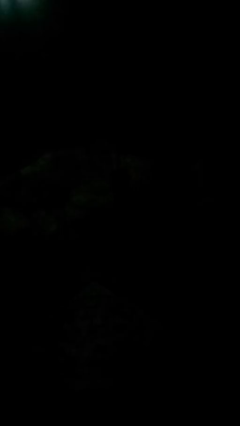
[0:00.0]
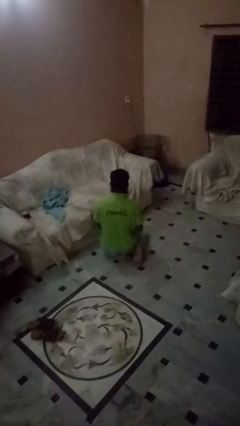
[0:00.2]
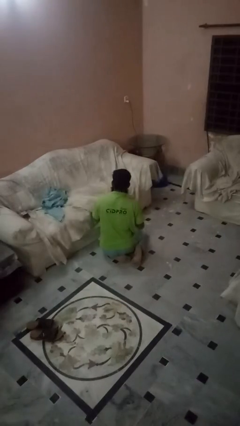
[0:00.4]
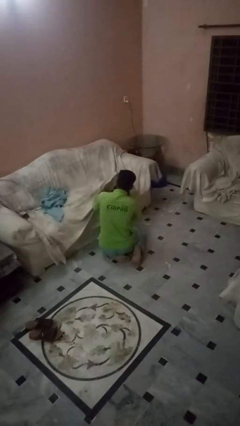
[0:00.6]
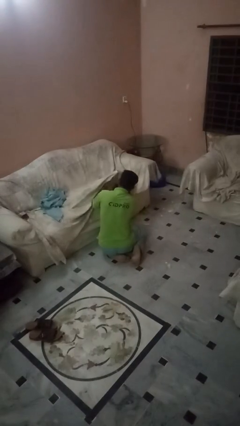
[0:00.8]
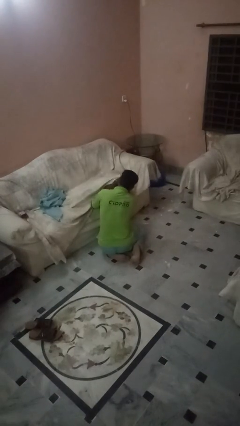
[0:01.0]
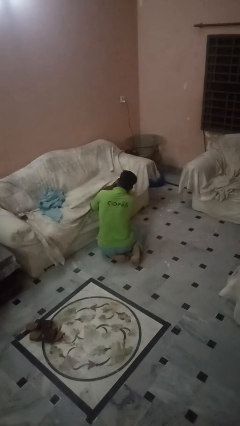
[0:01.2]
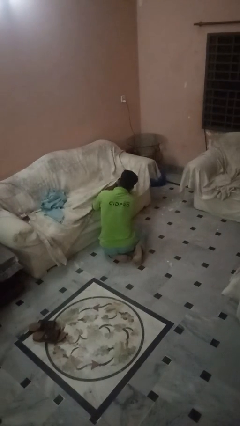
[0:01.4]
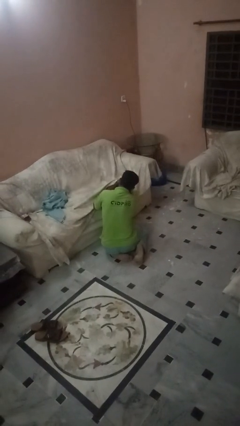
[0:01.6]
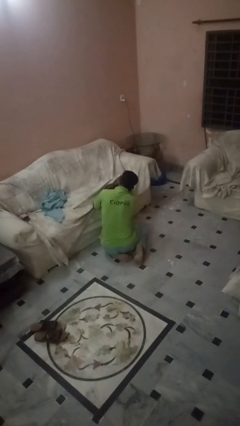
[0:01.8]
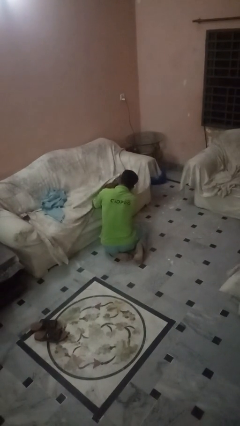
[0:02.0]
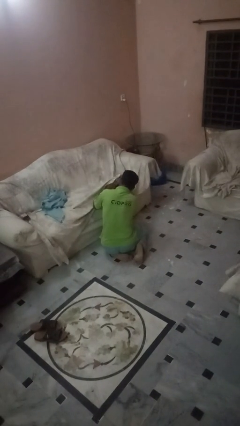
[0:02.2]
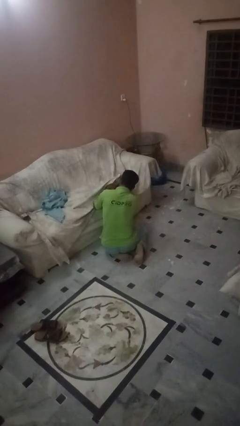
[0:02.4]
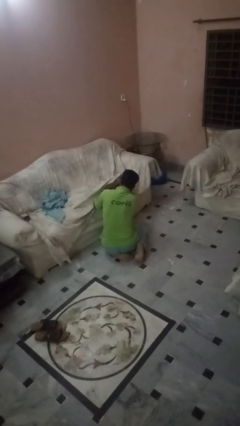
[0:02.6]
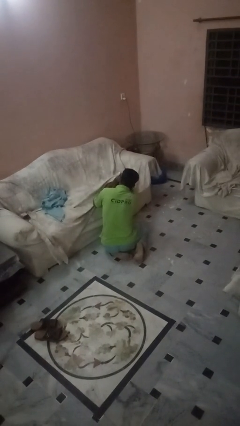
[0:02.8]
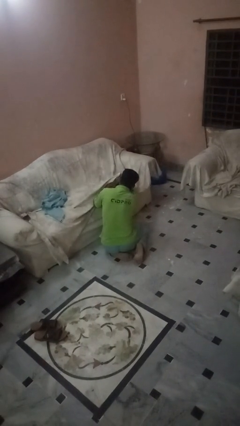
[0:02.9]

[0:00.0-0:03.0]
person searches in couch

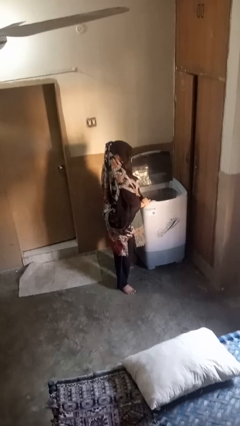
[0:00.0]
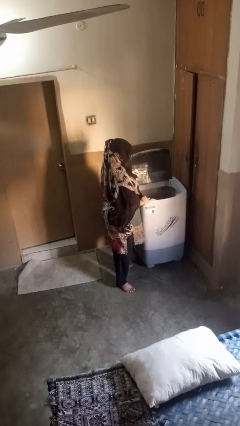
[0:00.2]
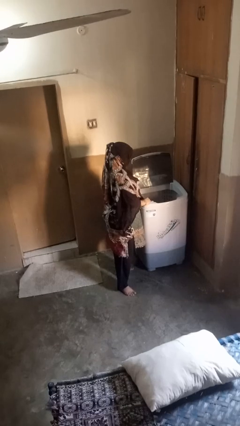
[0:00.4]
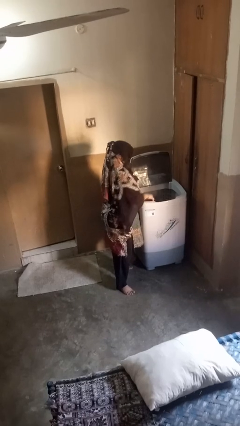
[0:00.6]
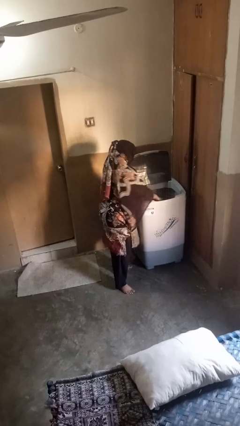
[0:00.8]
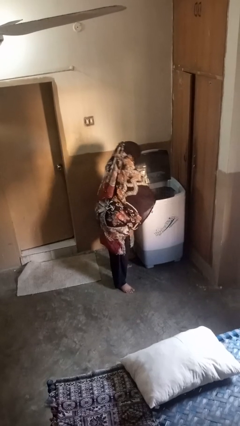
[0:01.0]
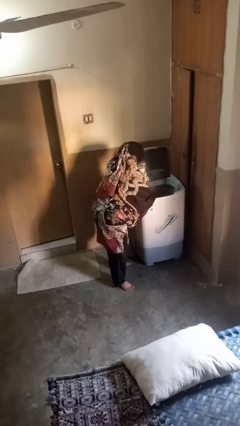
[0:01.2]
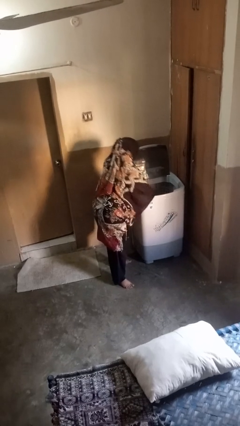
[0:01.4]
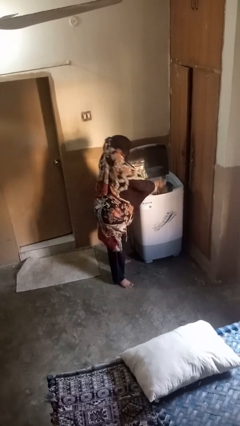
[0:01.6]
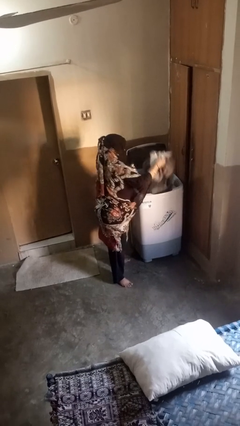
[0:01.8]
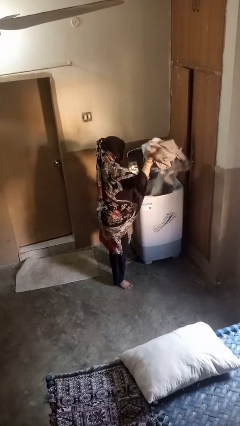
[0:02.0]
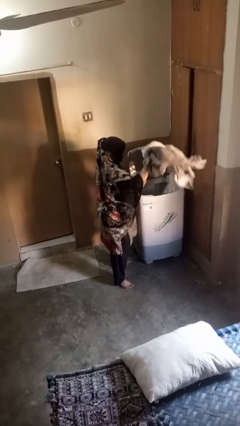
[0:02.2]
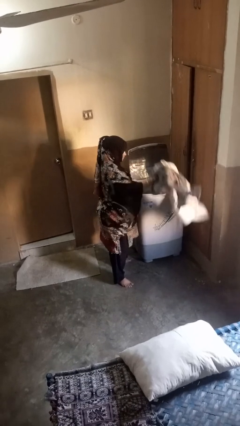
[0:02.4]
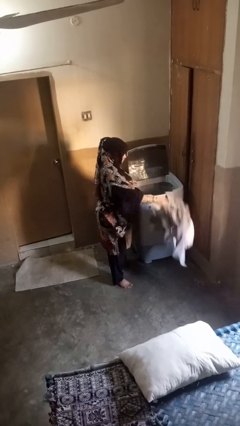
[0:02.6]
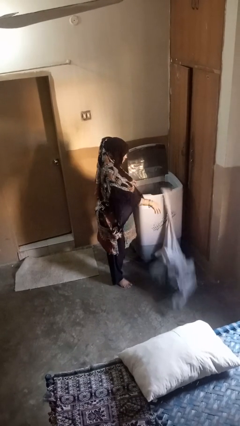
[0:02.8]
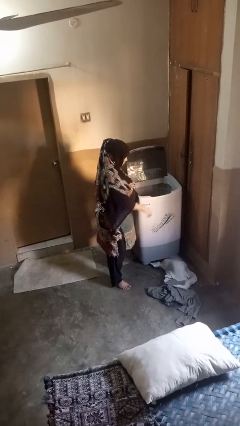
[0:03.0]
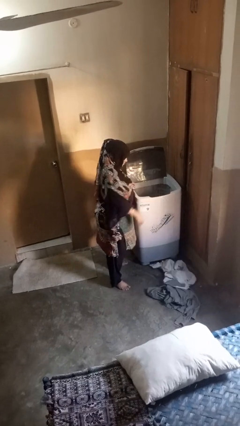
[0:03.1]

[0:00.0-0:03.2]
person unloads clotheswasher

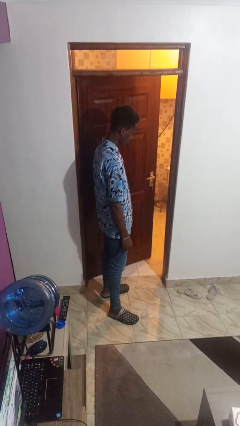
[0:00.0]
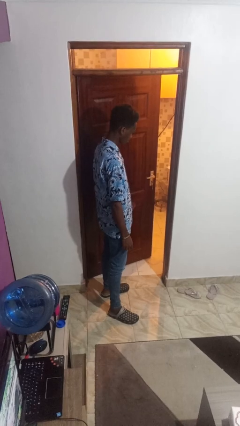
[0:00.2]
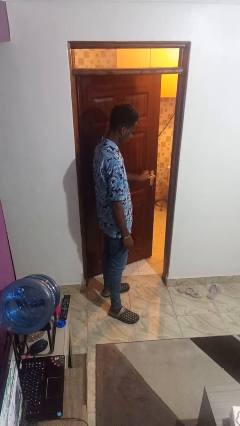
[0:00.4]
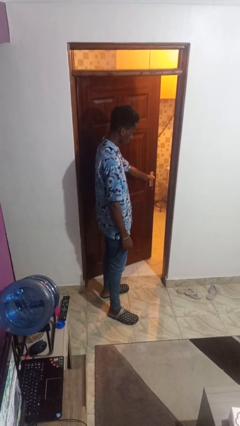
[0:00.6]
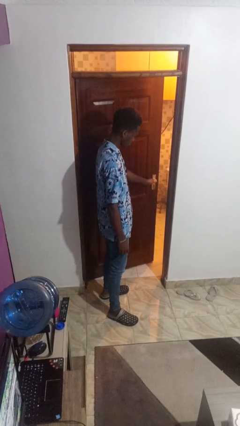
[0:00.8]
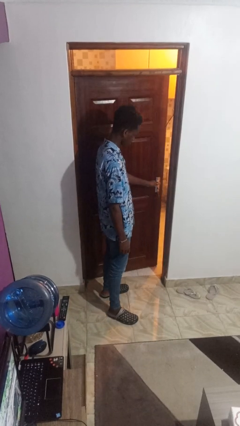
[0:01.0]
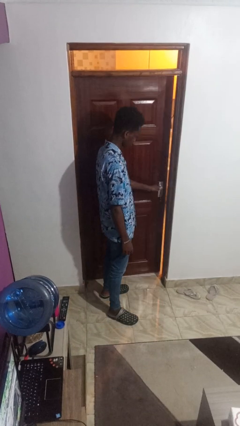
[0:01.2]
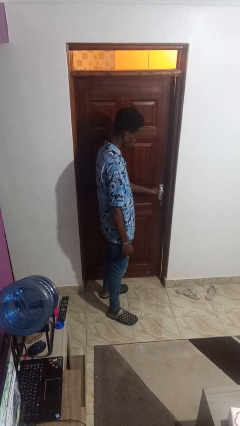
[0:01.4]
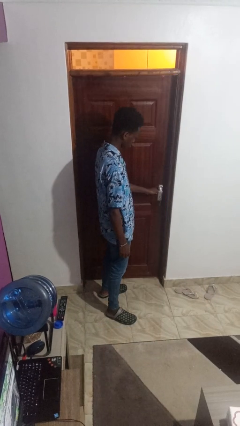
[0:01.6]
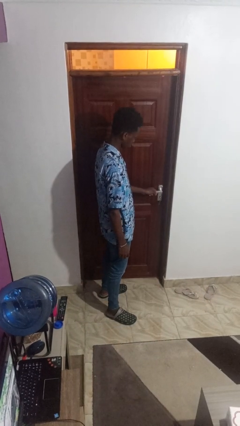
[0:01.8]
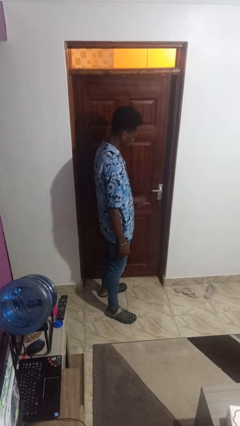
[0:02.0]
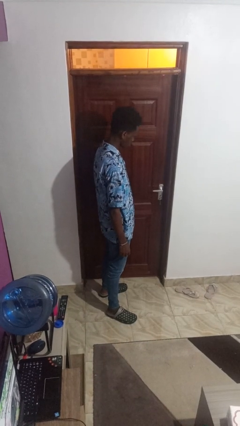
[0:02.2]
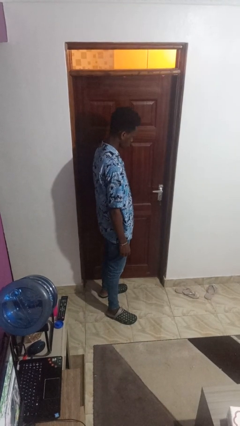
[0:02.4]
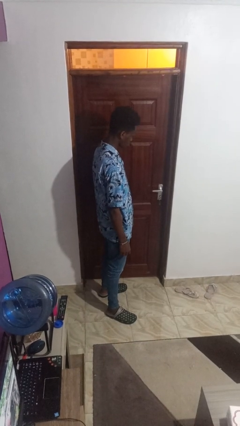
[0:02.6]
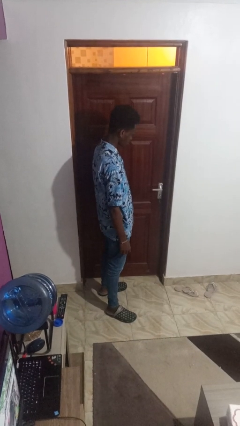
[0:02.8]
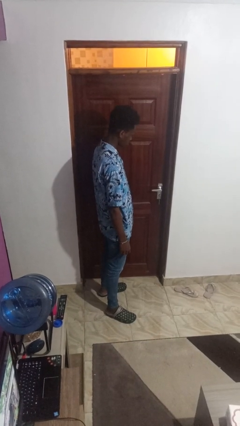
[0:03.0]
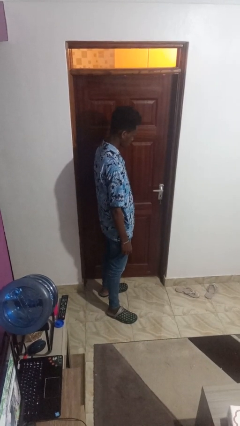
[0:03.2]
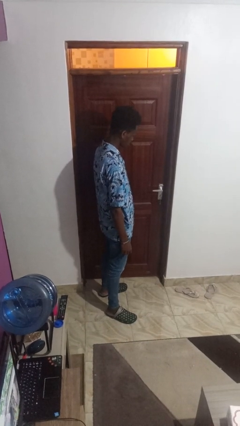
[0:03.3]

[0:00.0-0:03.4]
person closes facility door

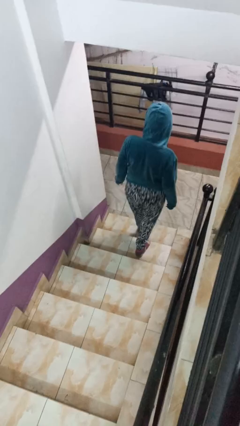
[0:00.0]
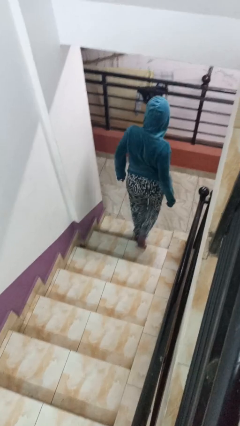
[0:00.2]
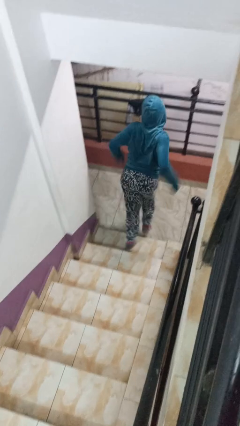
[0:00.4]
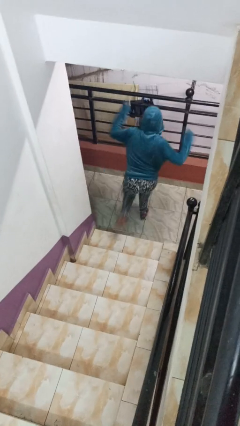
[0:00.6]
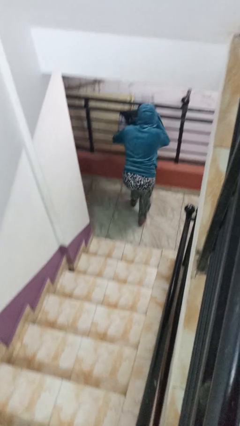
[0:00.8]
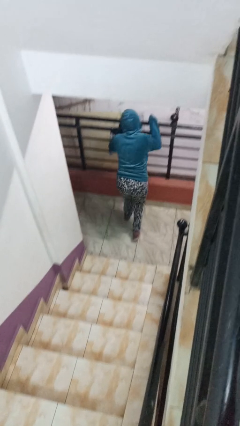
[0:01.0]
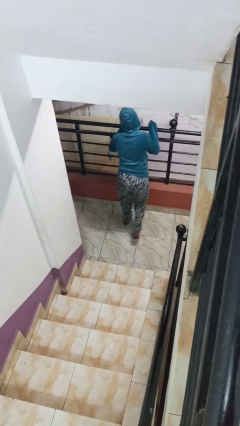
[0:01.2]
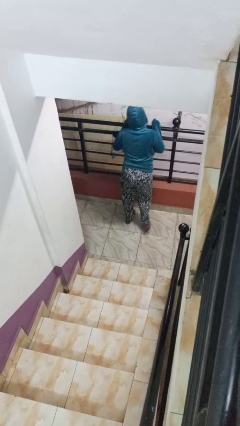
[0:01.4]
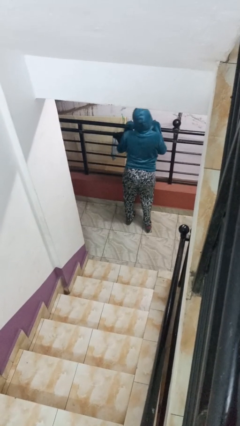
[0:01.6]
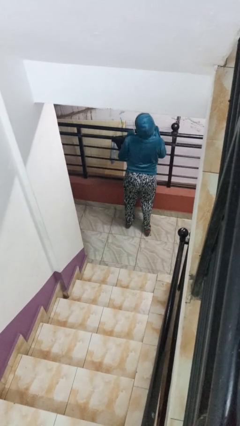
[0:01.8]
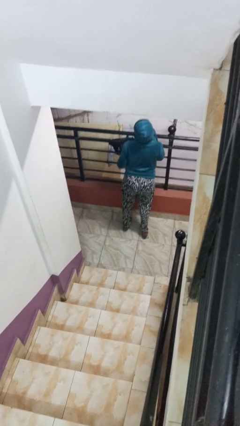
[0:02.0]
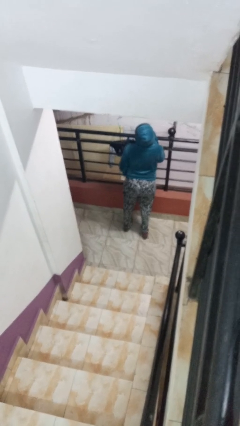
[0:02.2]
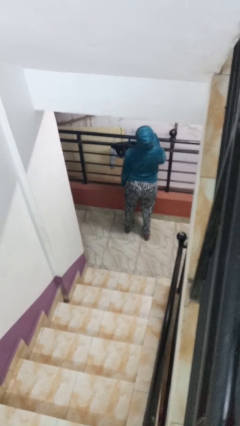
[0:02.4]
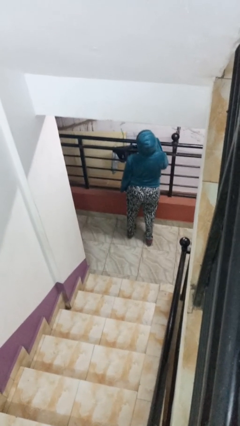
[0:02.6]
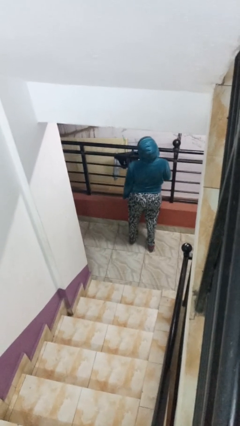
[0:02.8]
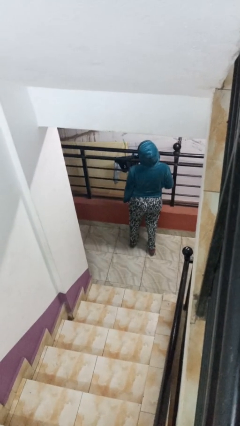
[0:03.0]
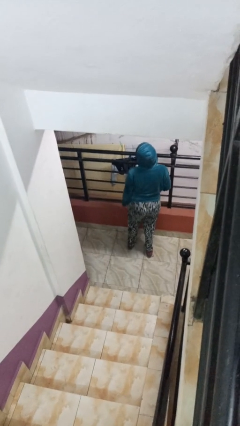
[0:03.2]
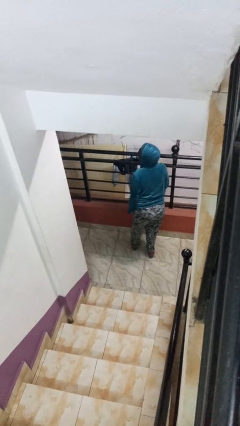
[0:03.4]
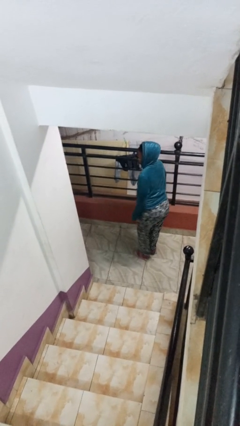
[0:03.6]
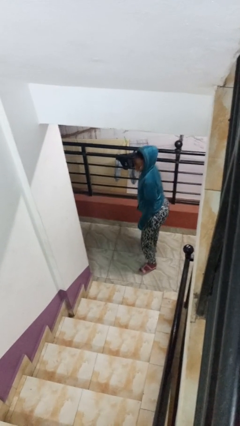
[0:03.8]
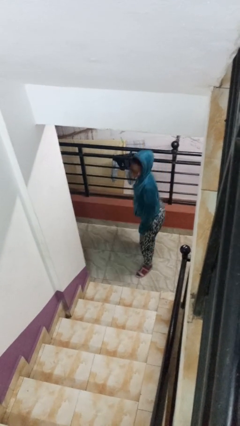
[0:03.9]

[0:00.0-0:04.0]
person trips on stair

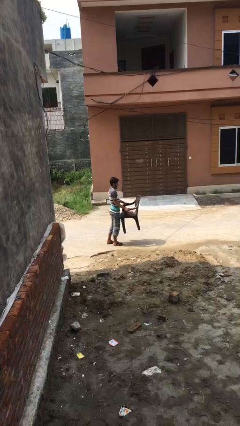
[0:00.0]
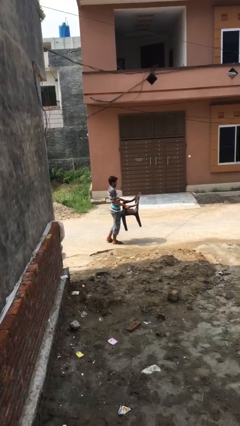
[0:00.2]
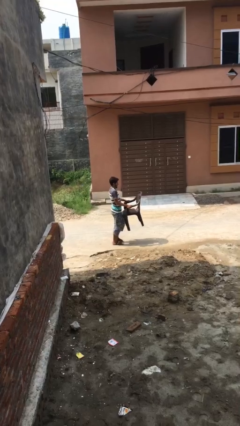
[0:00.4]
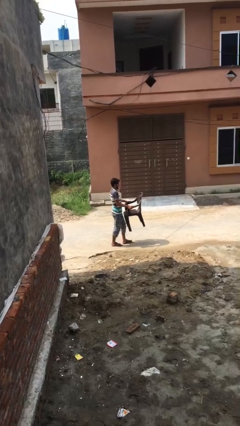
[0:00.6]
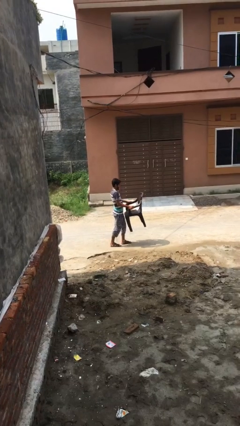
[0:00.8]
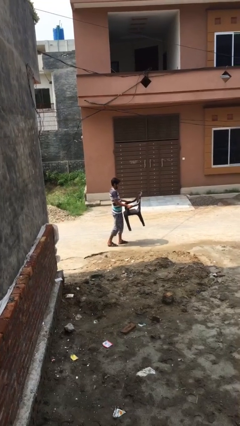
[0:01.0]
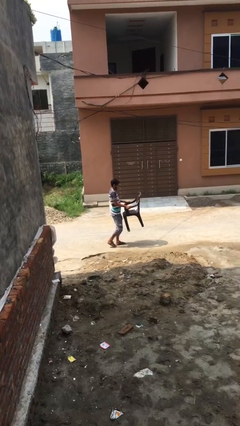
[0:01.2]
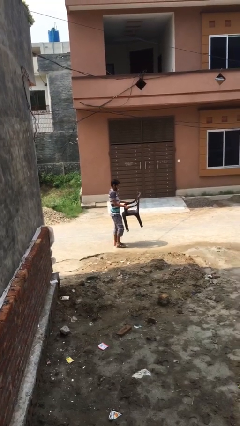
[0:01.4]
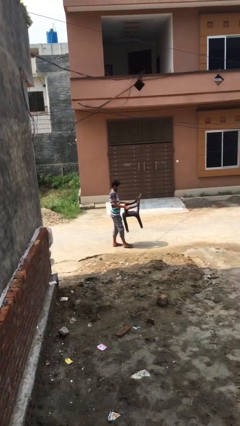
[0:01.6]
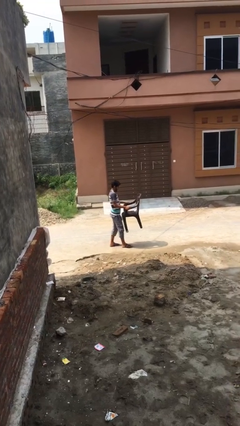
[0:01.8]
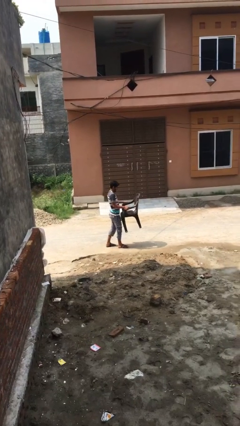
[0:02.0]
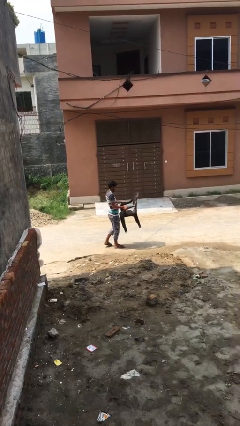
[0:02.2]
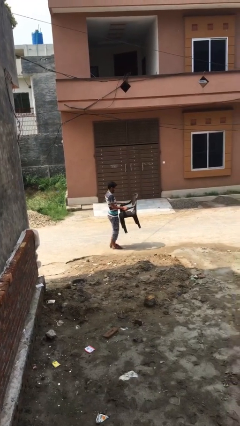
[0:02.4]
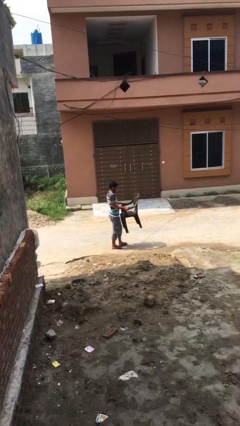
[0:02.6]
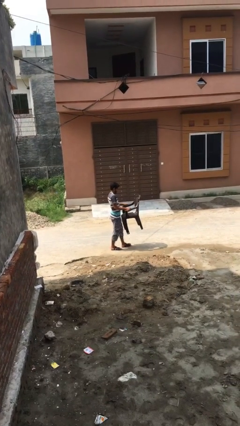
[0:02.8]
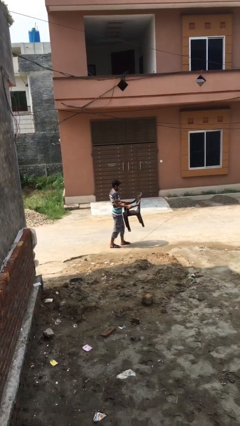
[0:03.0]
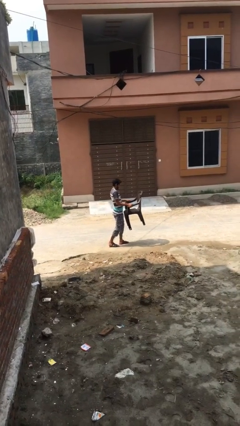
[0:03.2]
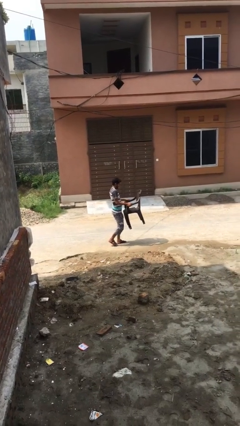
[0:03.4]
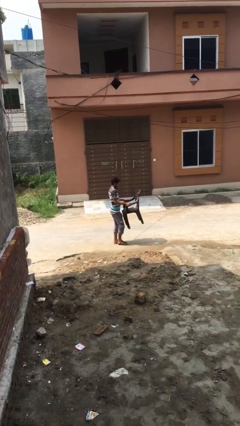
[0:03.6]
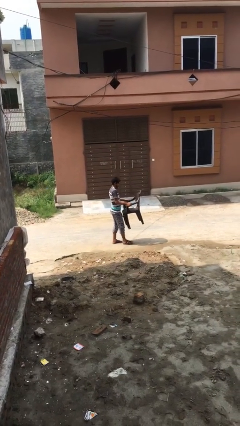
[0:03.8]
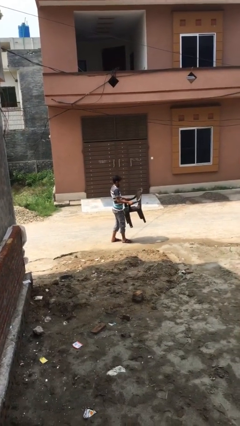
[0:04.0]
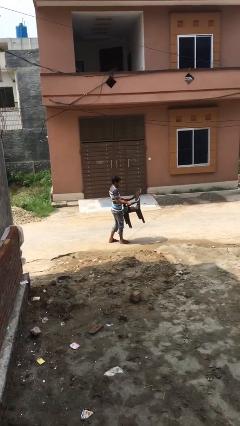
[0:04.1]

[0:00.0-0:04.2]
person carries heavy object
